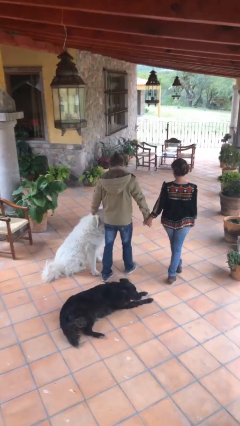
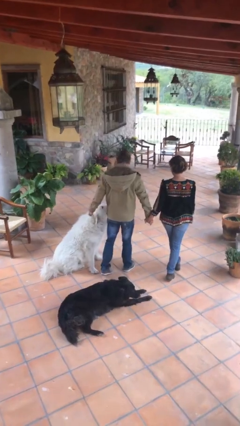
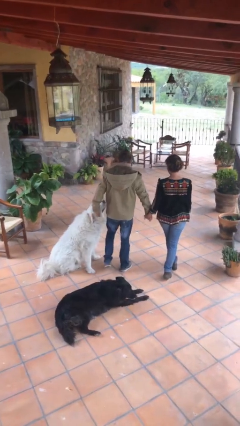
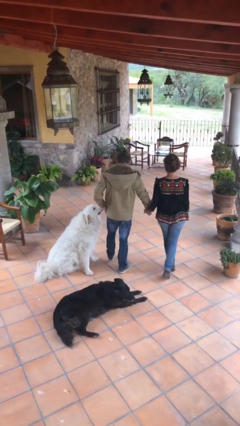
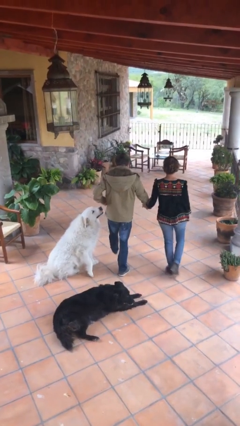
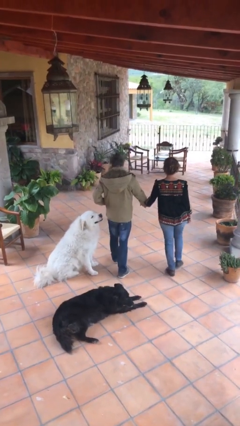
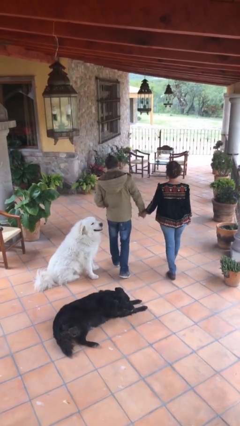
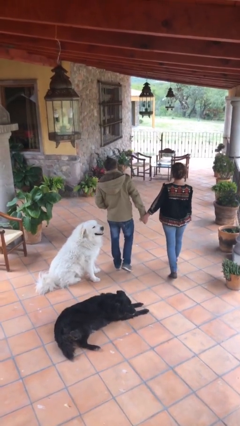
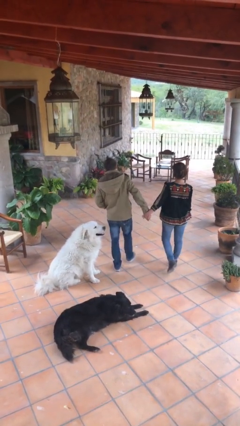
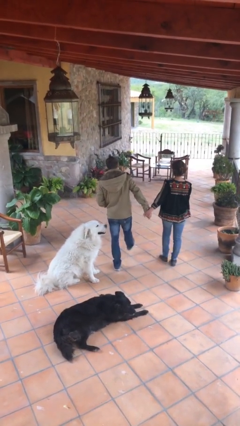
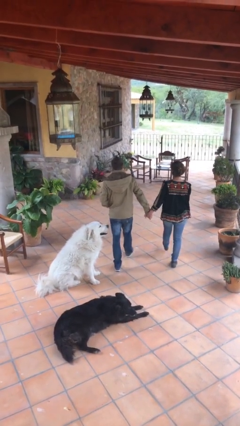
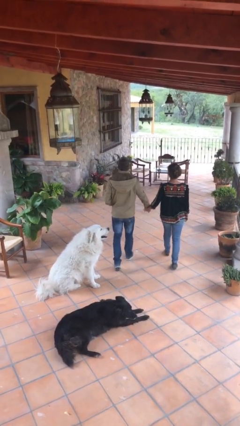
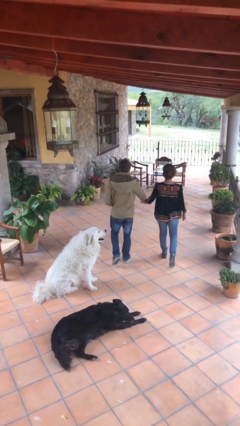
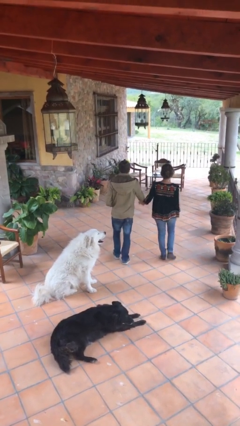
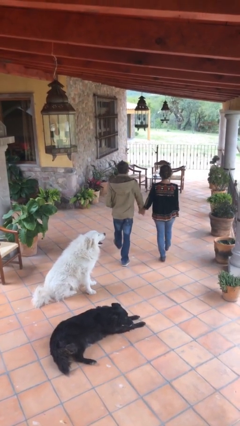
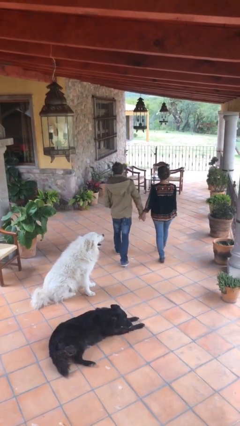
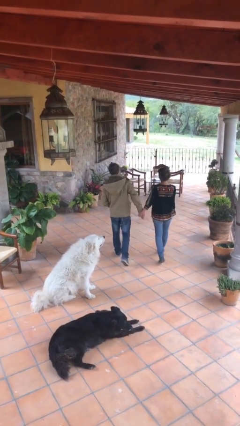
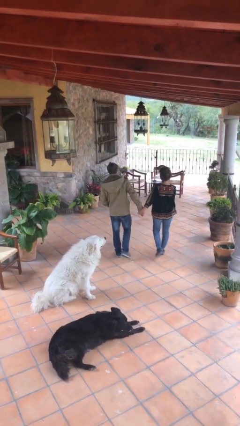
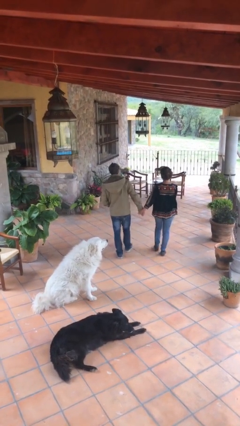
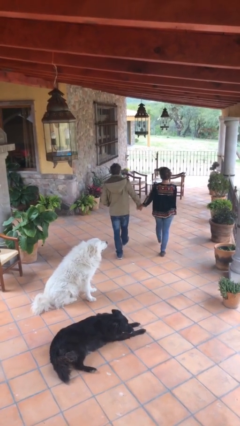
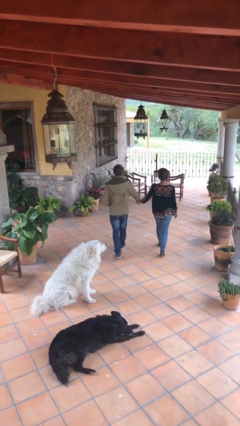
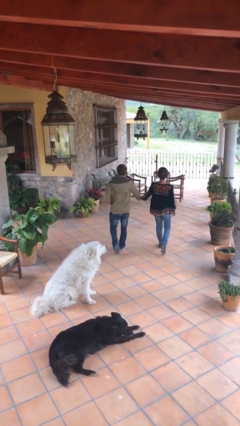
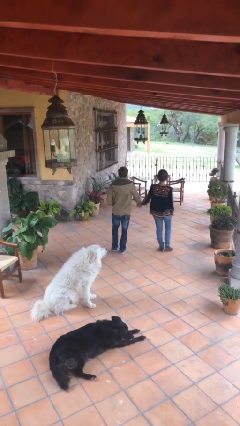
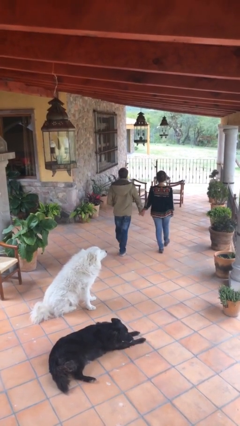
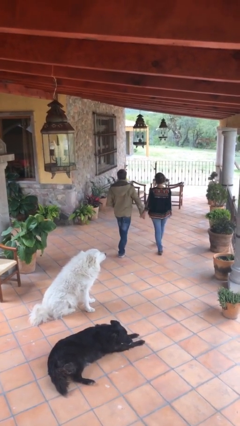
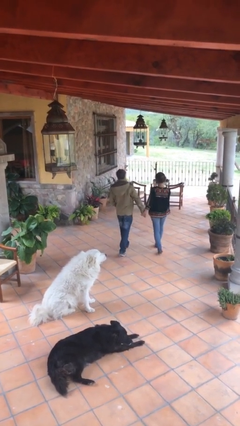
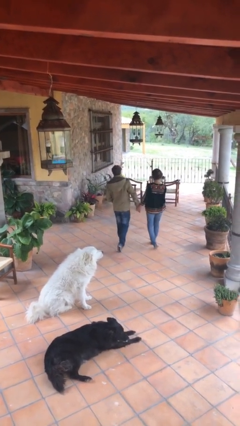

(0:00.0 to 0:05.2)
person holds hand

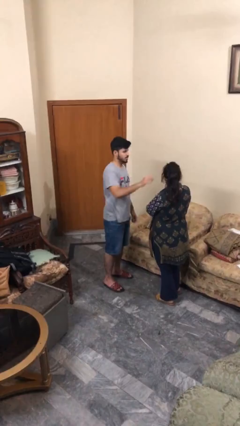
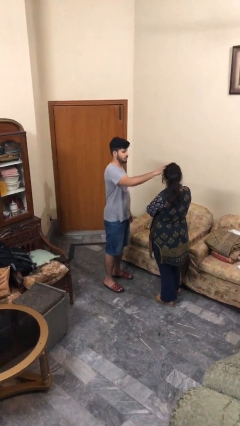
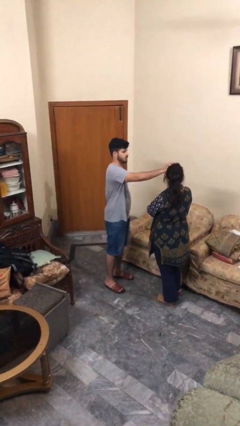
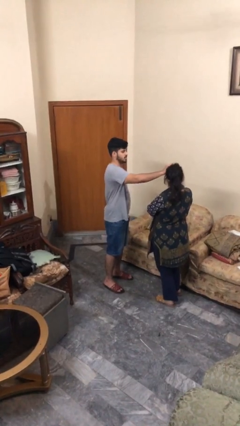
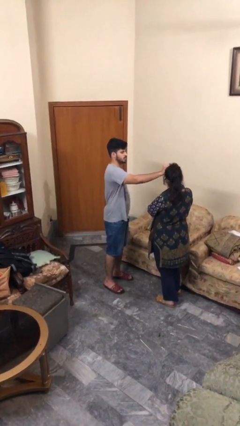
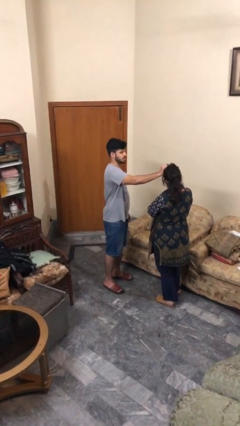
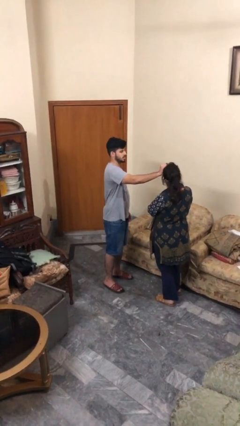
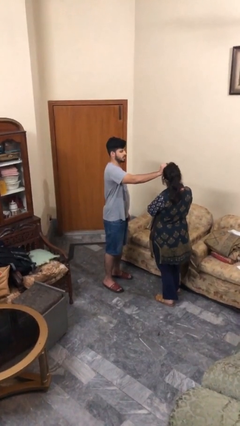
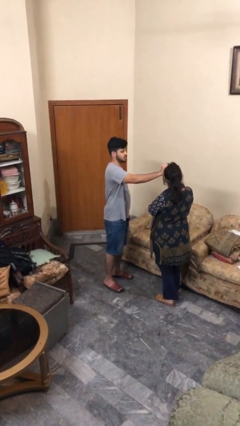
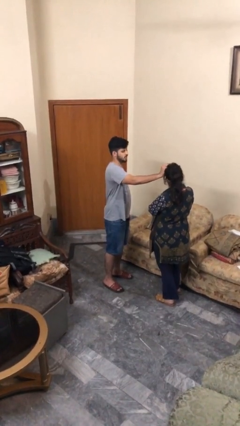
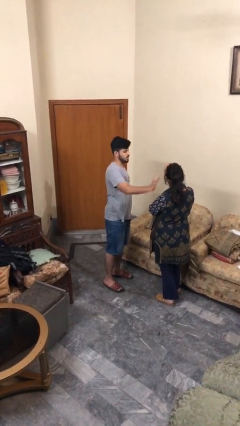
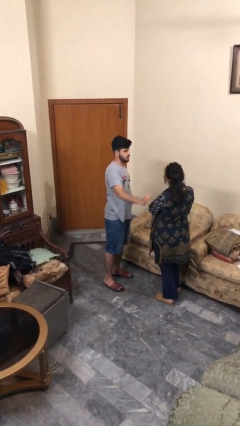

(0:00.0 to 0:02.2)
person grabs person by hair

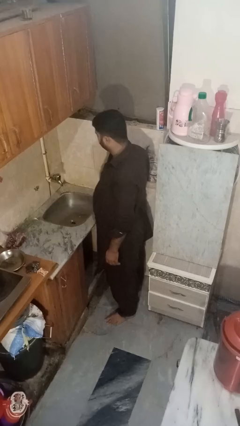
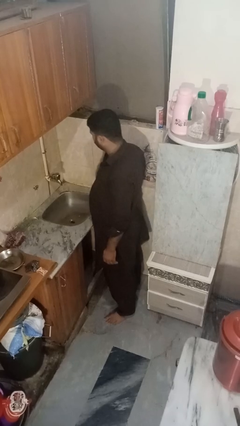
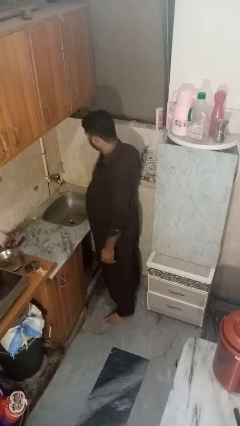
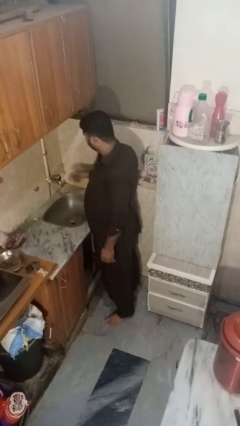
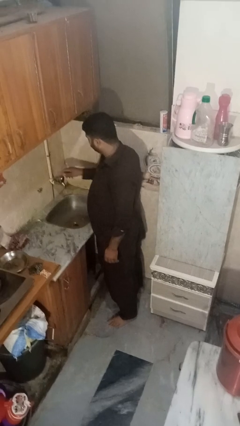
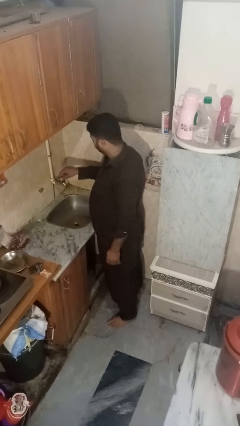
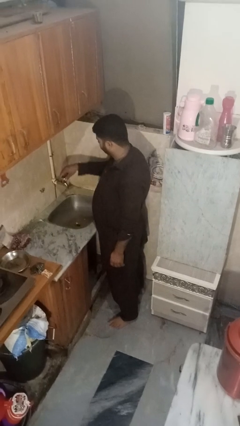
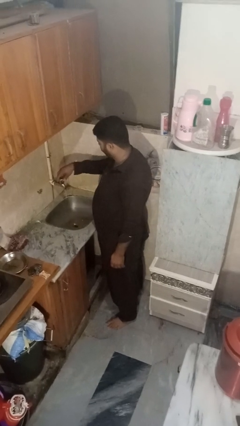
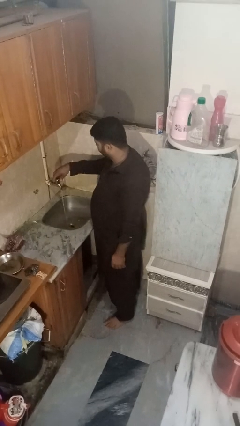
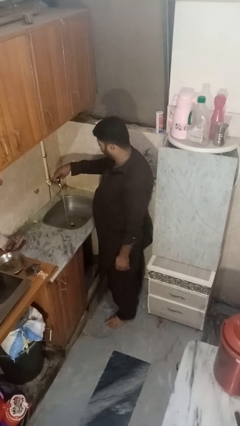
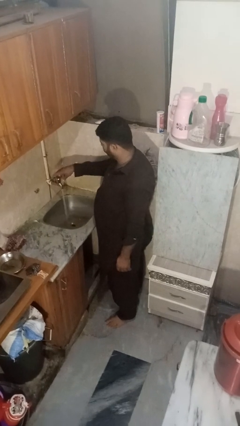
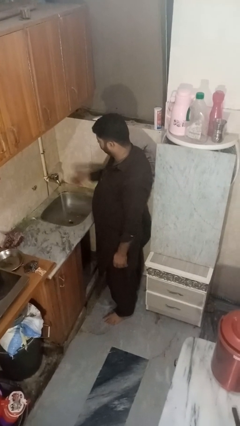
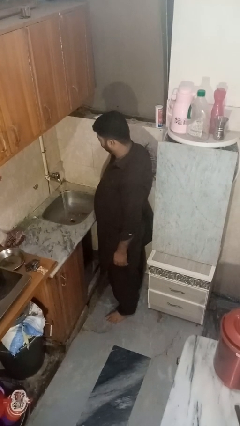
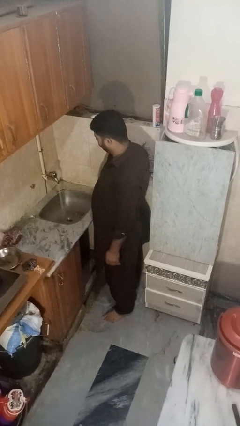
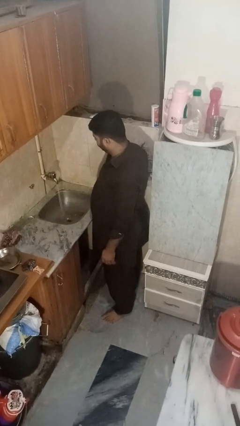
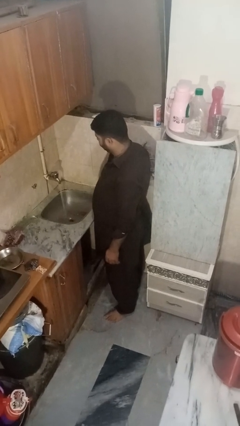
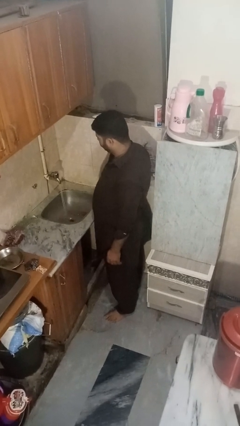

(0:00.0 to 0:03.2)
person turns on faucet

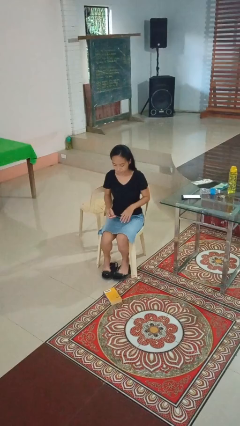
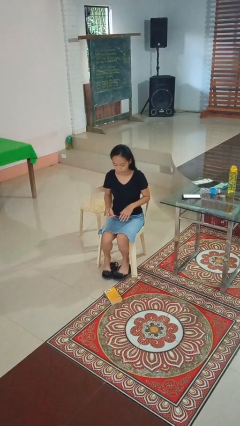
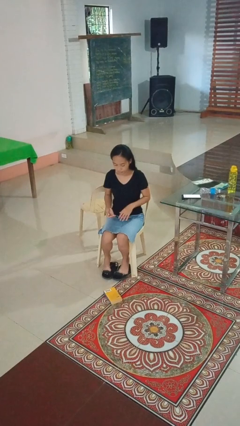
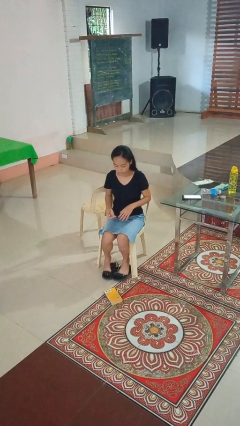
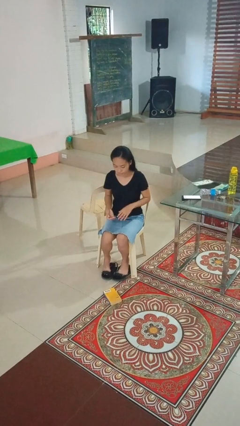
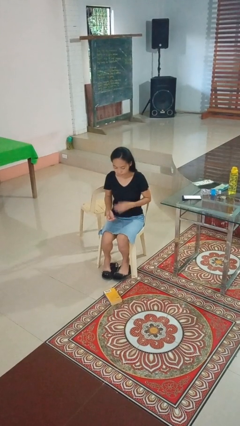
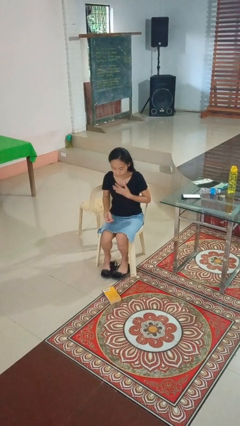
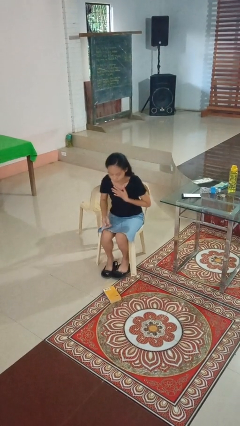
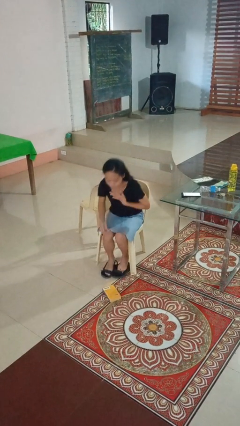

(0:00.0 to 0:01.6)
person drops object

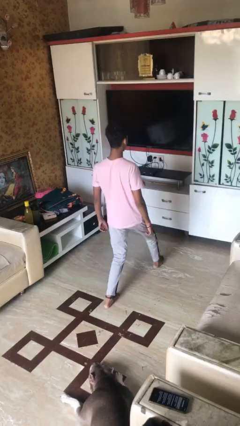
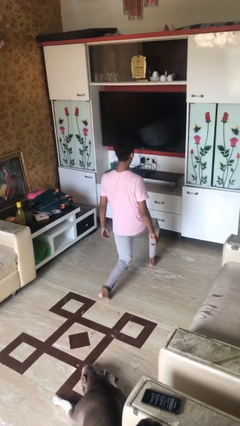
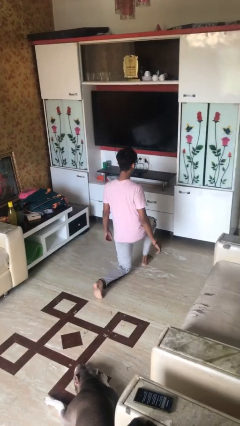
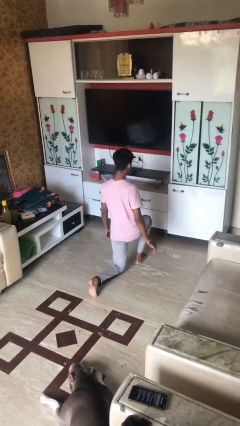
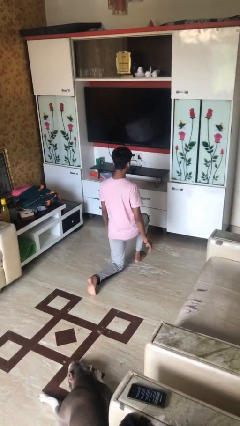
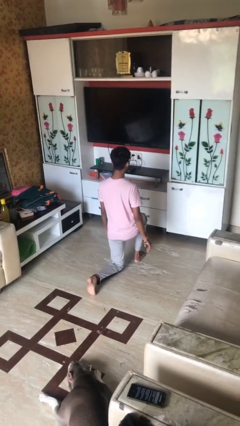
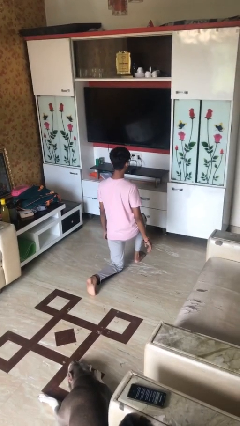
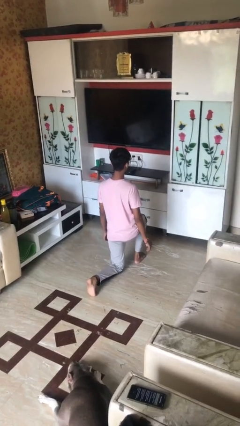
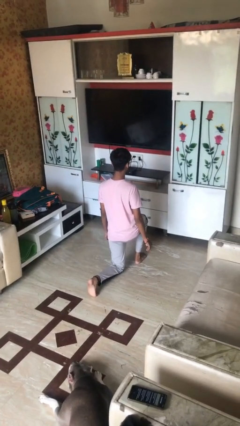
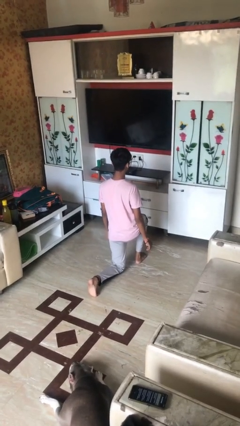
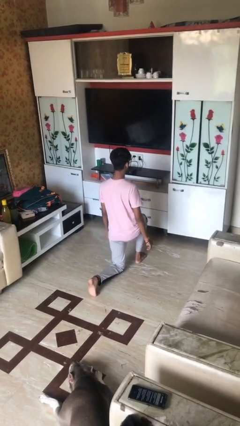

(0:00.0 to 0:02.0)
person exercises with lunges

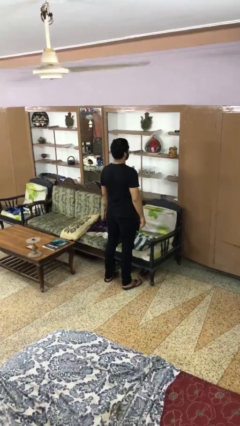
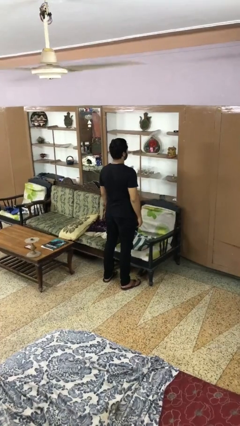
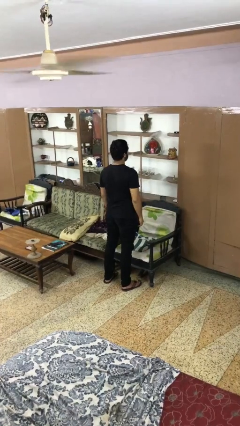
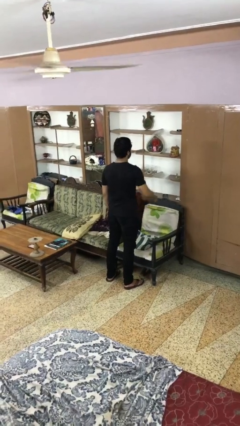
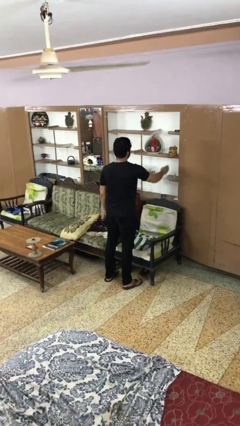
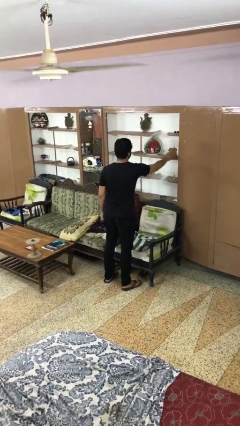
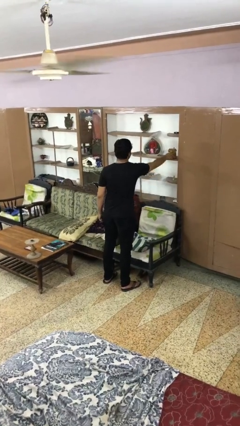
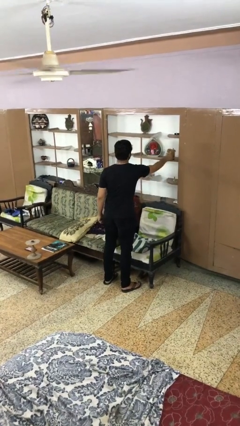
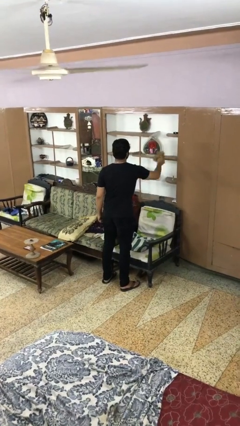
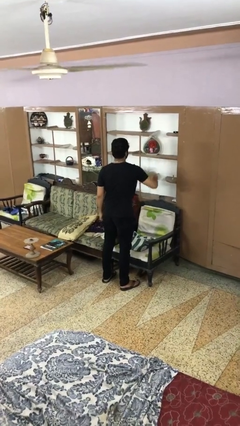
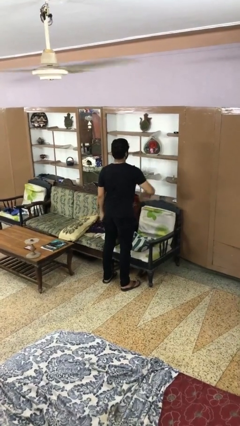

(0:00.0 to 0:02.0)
person picks up object from shelf

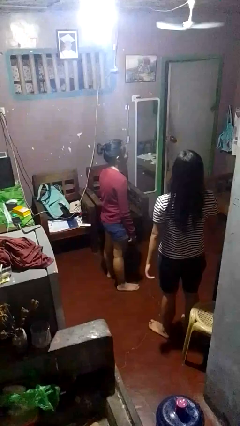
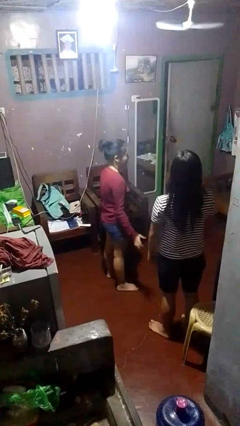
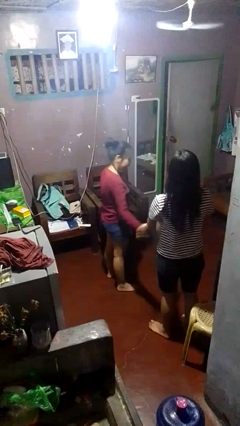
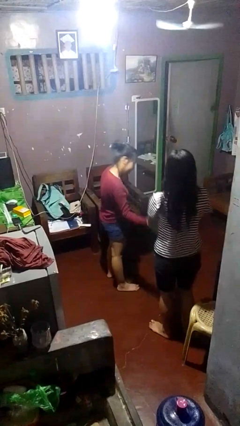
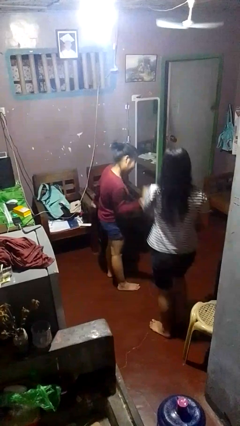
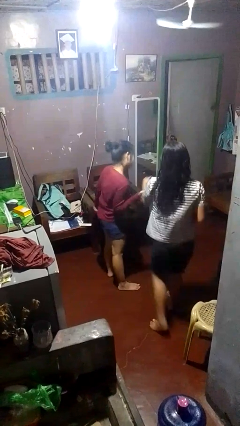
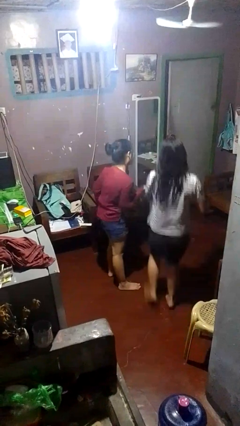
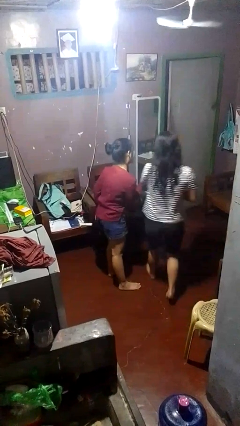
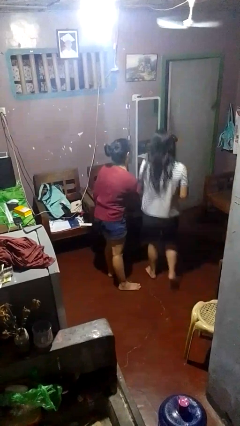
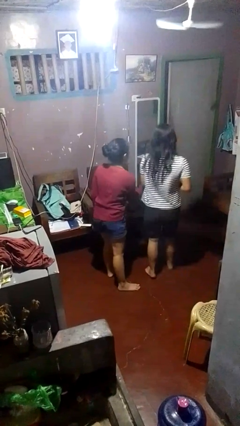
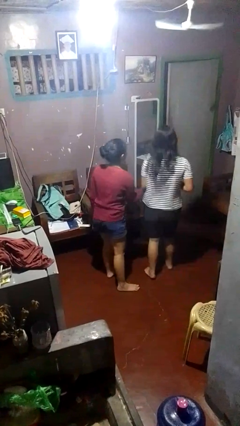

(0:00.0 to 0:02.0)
person grabs person by forearm
